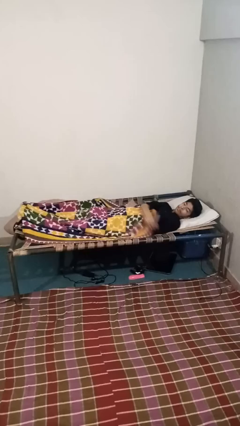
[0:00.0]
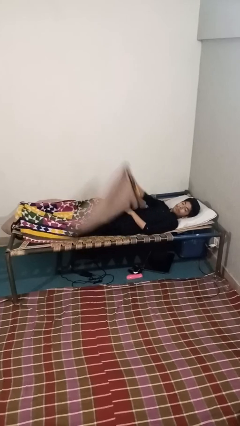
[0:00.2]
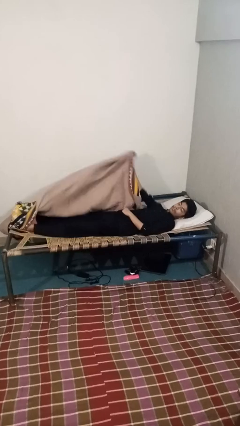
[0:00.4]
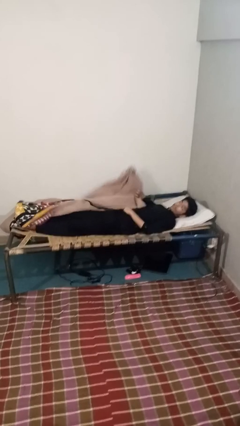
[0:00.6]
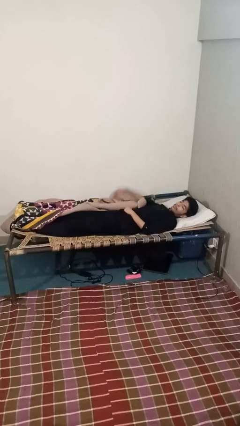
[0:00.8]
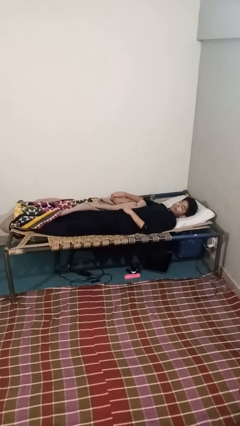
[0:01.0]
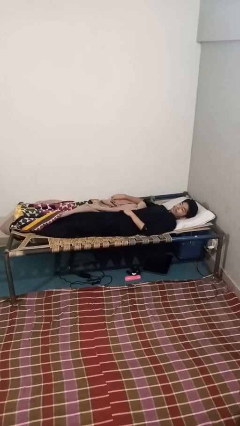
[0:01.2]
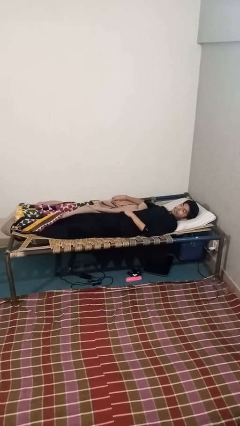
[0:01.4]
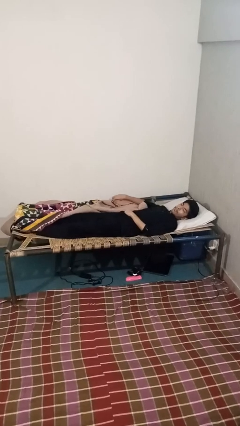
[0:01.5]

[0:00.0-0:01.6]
person uncovers with bedsheets

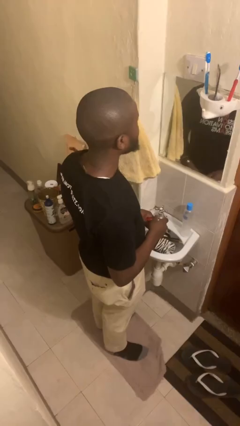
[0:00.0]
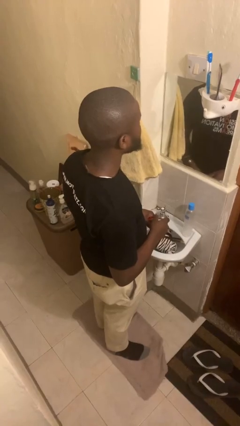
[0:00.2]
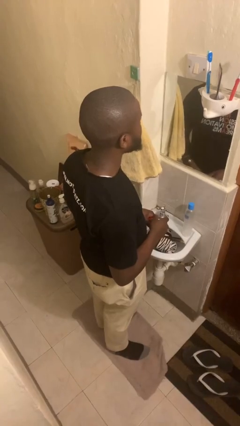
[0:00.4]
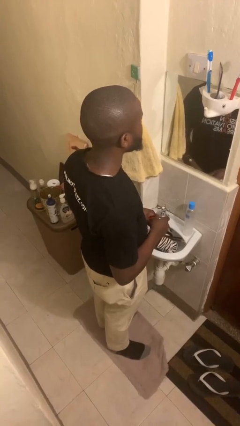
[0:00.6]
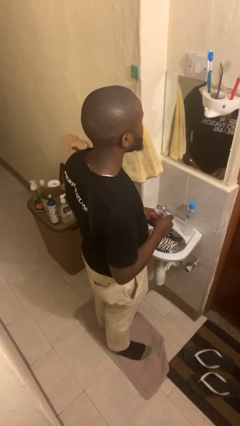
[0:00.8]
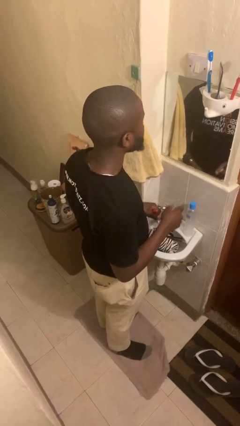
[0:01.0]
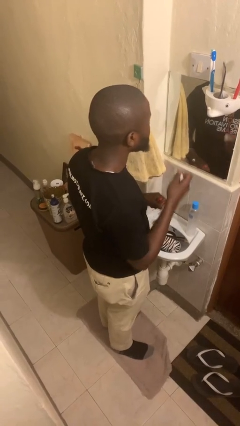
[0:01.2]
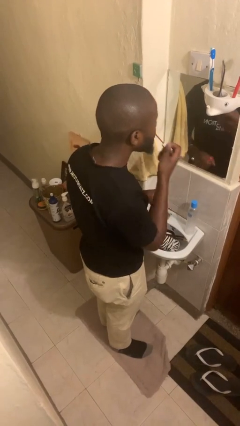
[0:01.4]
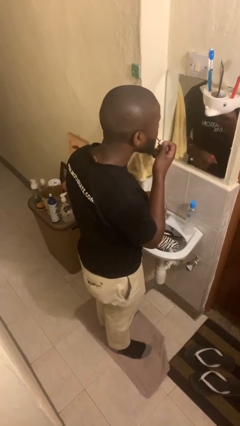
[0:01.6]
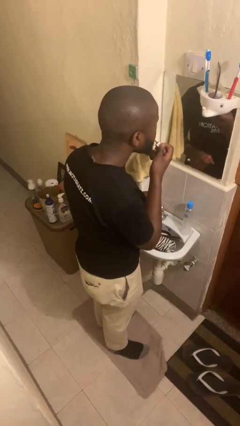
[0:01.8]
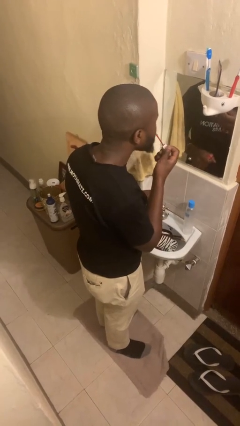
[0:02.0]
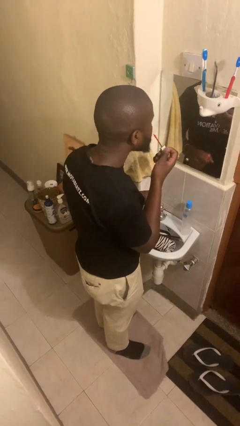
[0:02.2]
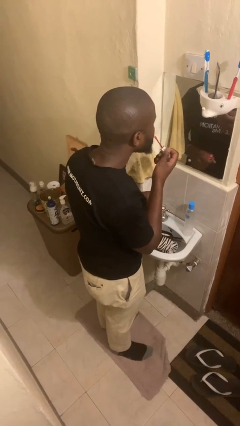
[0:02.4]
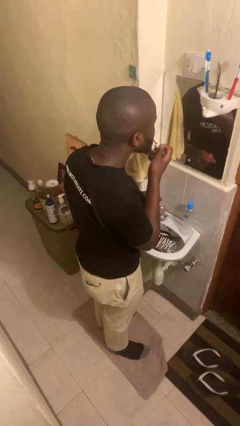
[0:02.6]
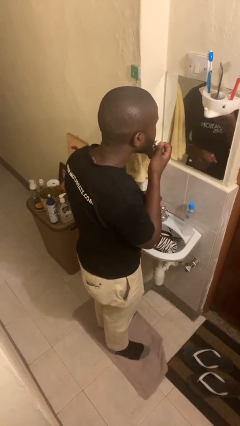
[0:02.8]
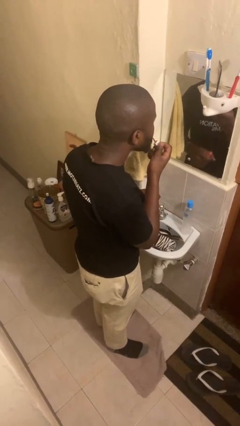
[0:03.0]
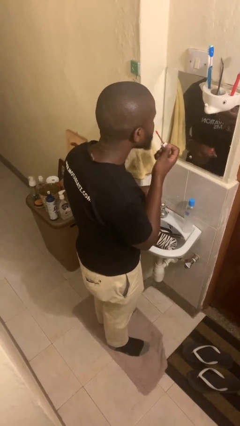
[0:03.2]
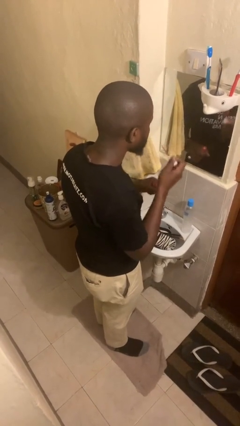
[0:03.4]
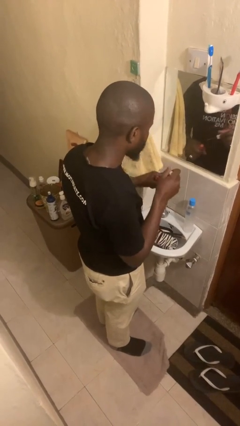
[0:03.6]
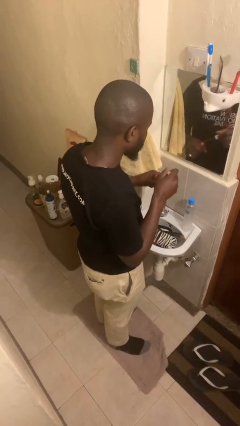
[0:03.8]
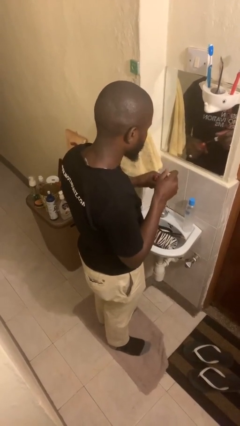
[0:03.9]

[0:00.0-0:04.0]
person applies lip makeup

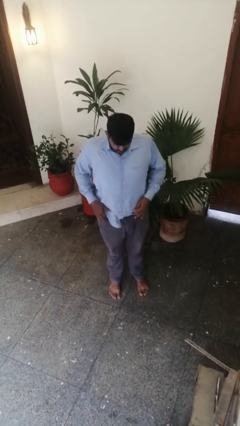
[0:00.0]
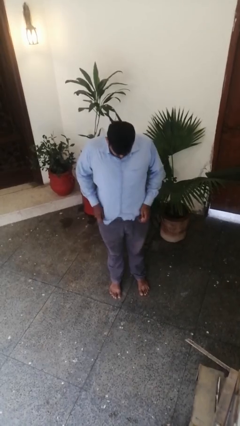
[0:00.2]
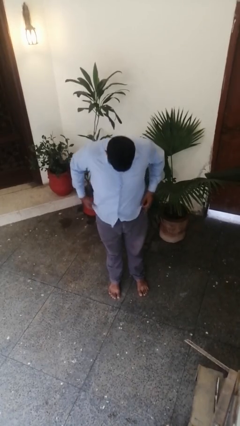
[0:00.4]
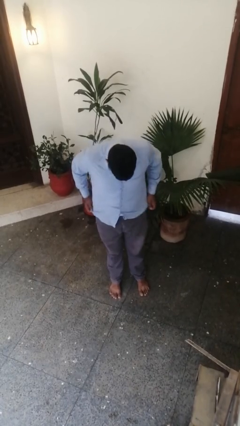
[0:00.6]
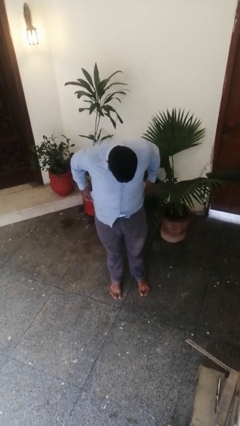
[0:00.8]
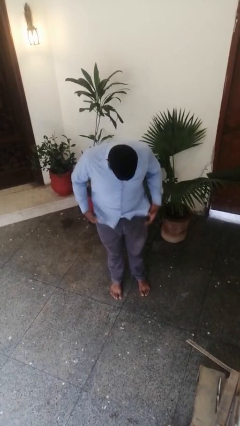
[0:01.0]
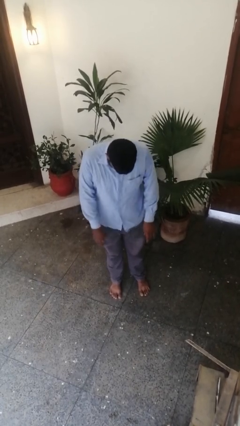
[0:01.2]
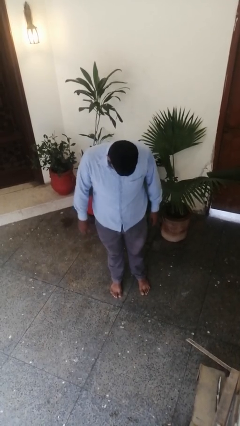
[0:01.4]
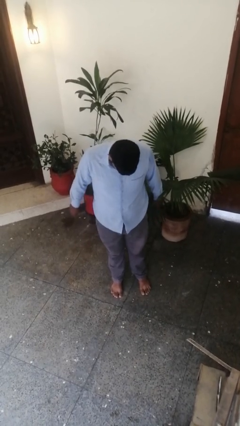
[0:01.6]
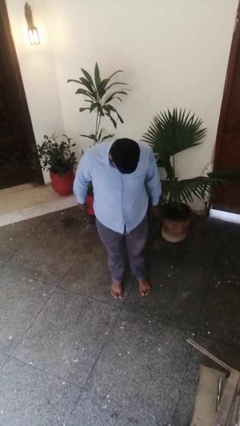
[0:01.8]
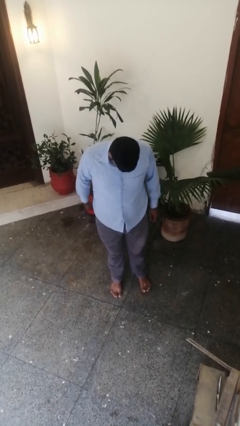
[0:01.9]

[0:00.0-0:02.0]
person untucks shirt

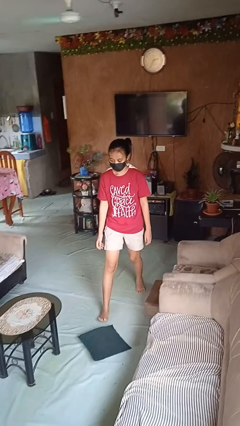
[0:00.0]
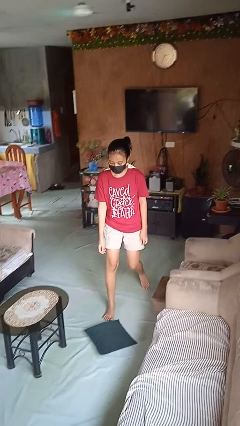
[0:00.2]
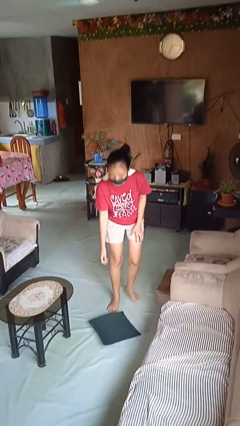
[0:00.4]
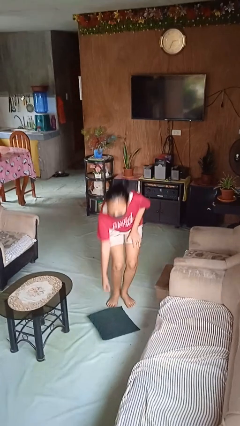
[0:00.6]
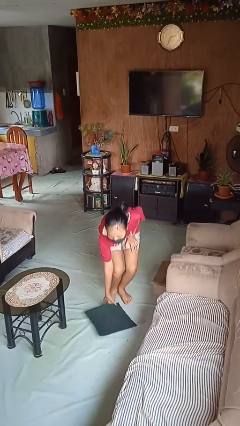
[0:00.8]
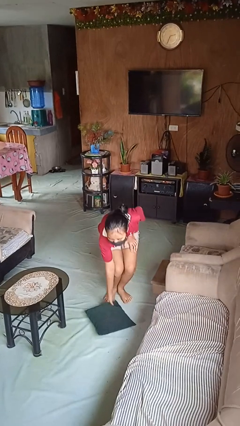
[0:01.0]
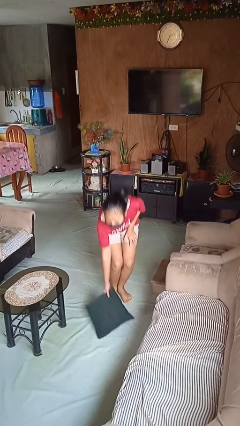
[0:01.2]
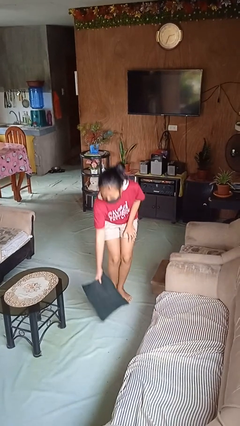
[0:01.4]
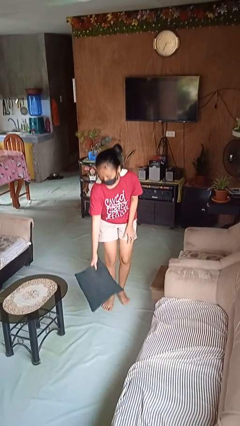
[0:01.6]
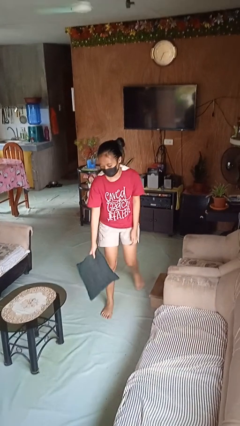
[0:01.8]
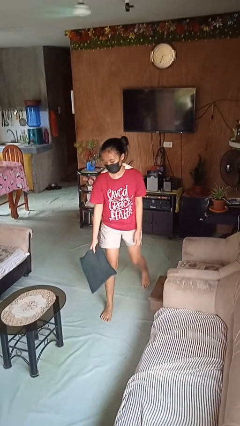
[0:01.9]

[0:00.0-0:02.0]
person picks up object from floor

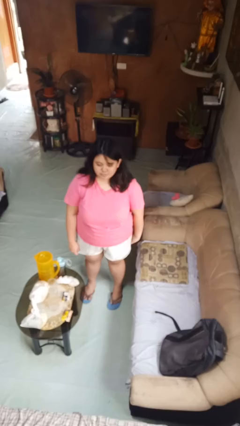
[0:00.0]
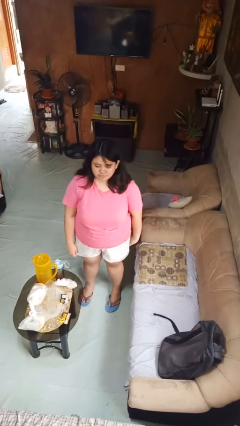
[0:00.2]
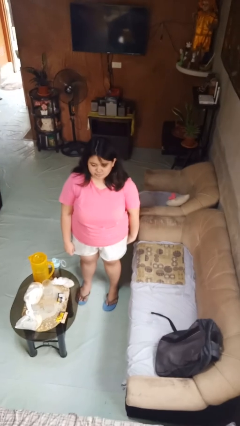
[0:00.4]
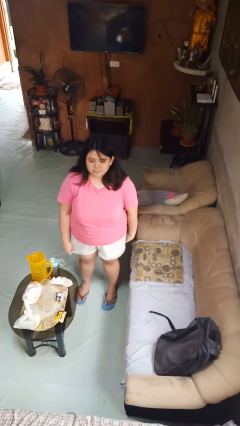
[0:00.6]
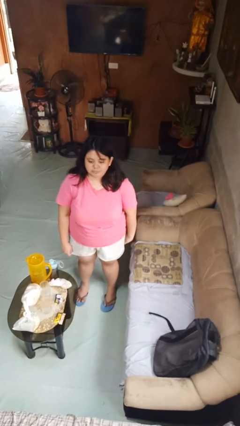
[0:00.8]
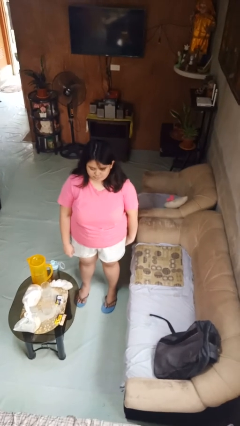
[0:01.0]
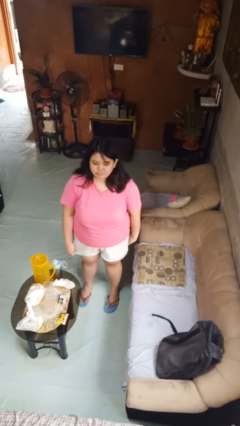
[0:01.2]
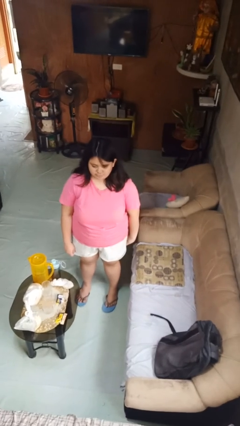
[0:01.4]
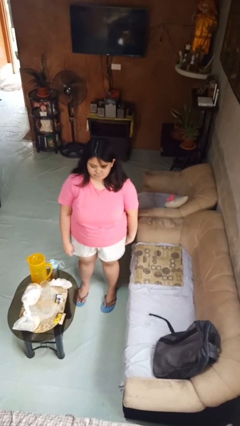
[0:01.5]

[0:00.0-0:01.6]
person nods head

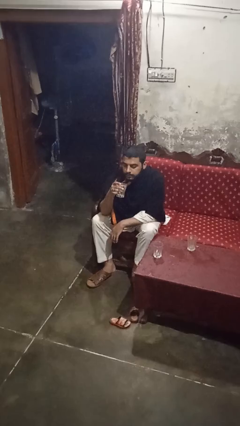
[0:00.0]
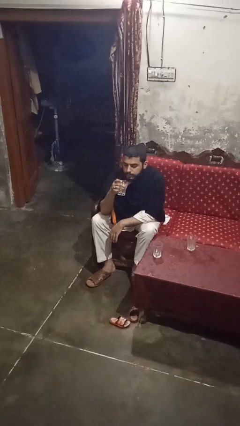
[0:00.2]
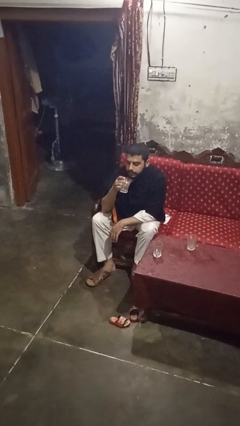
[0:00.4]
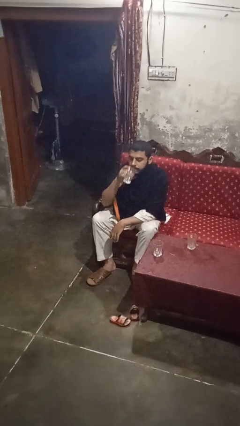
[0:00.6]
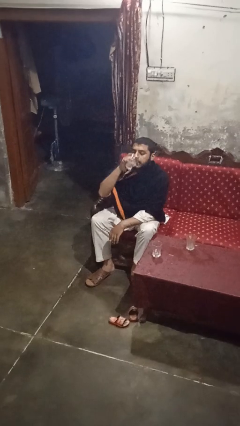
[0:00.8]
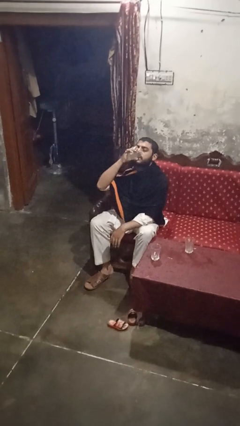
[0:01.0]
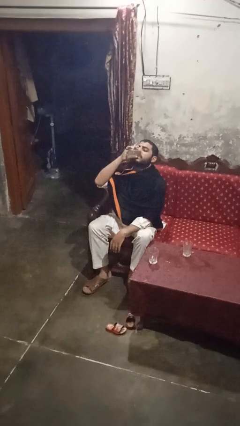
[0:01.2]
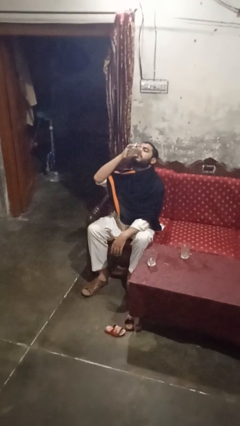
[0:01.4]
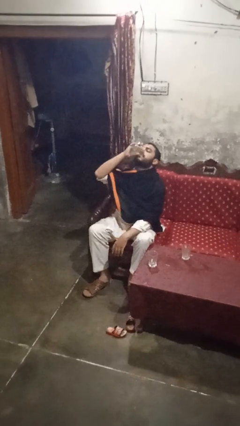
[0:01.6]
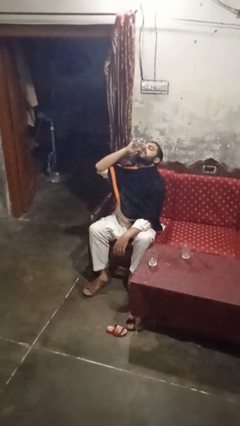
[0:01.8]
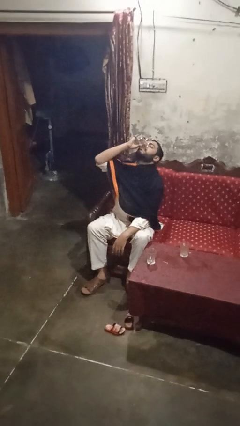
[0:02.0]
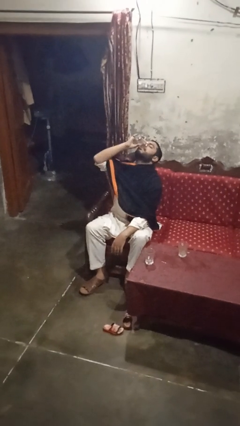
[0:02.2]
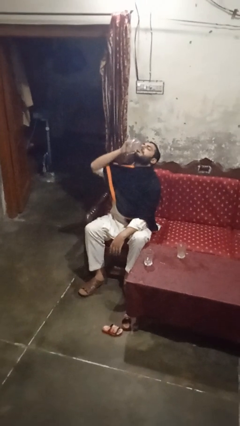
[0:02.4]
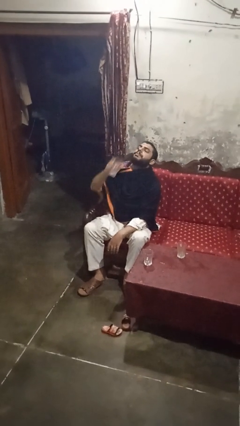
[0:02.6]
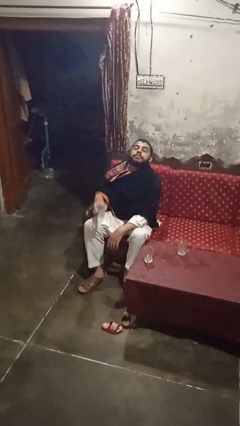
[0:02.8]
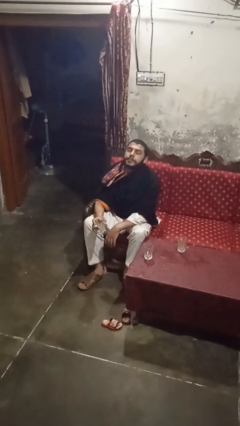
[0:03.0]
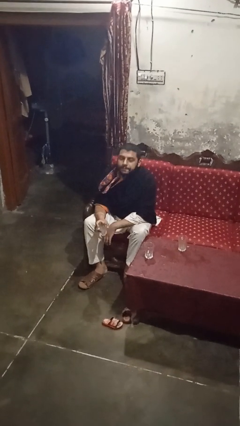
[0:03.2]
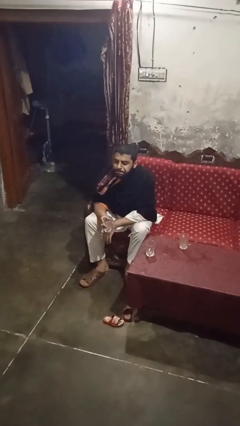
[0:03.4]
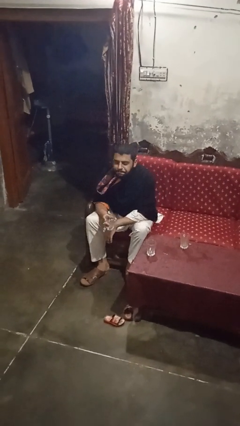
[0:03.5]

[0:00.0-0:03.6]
person drinks from shotglass

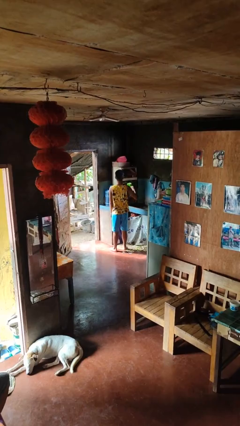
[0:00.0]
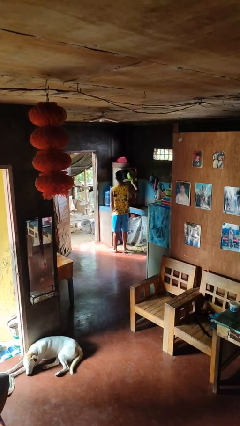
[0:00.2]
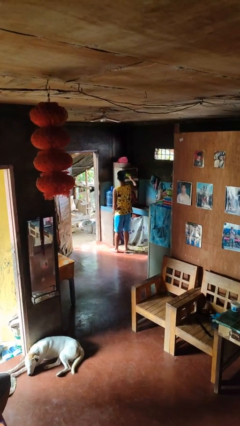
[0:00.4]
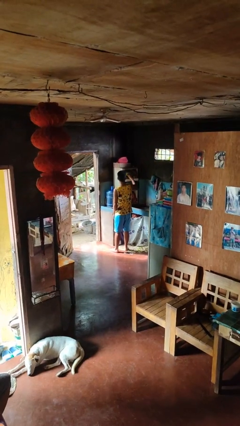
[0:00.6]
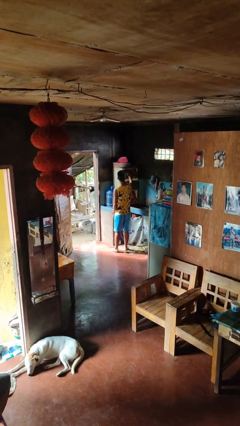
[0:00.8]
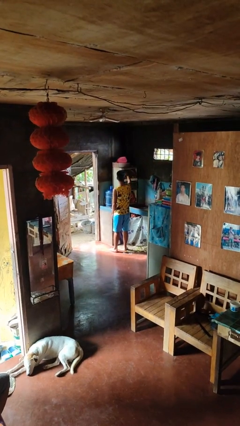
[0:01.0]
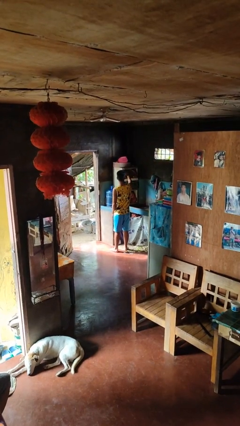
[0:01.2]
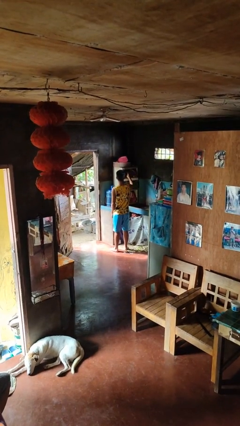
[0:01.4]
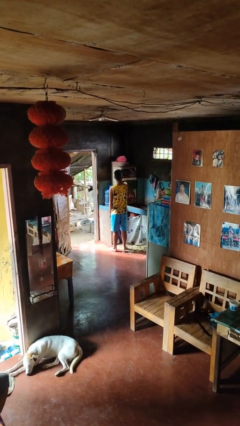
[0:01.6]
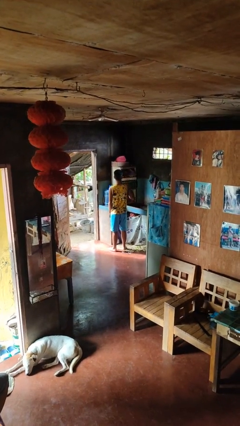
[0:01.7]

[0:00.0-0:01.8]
person puts object in cabinet

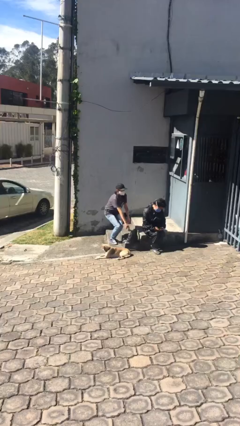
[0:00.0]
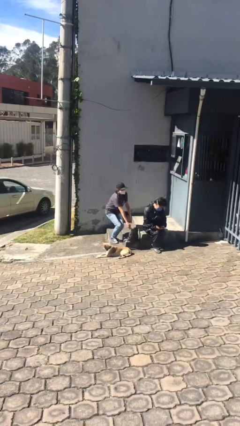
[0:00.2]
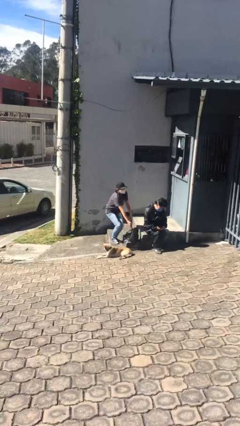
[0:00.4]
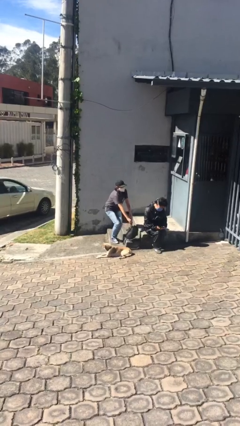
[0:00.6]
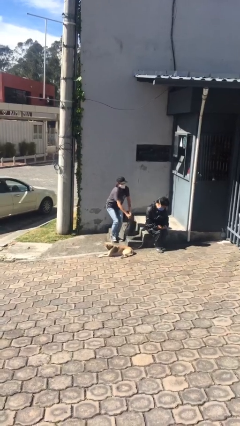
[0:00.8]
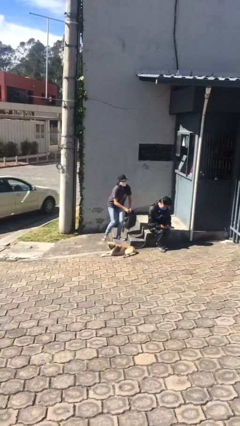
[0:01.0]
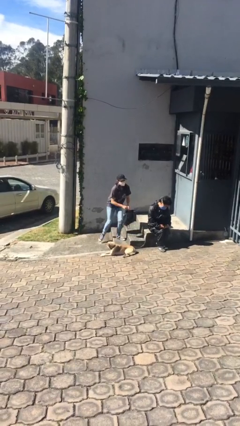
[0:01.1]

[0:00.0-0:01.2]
person steals object from person
